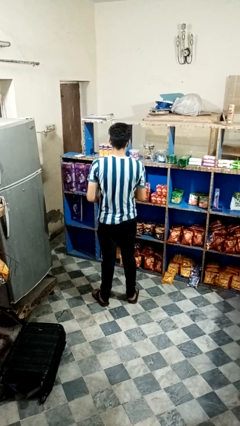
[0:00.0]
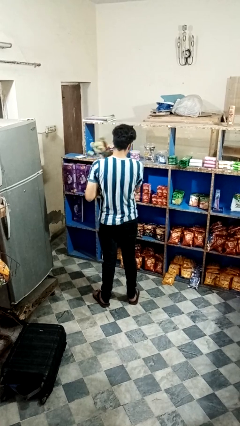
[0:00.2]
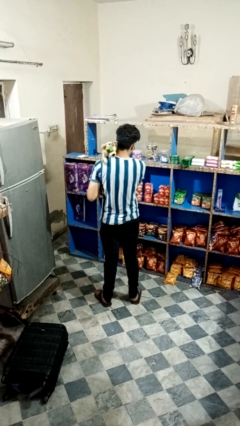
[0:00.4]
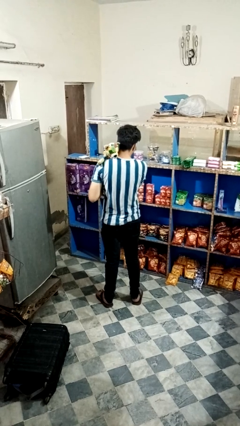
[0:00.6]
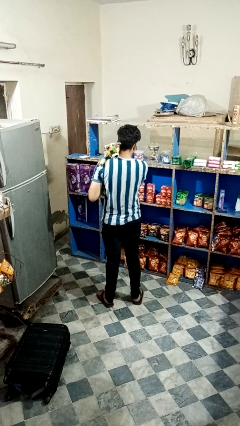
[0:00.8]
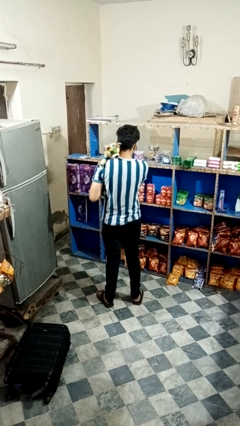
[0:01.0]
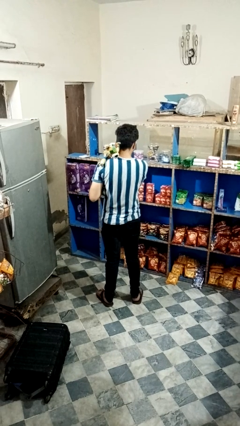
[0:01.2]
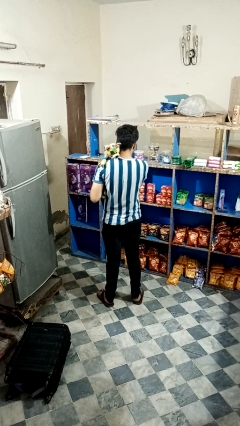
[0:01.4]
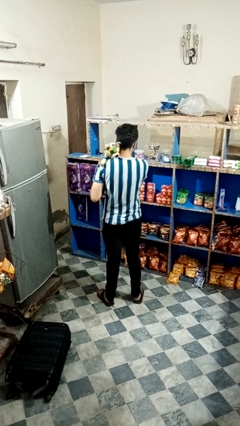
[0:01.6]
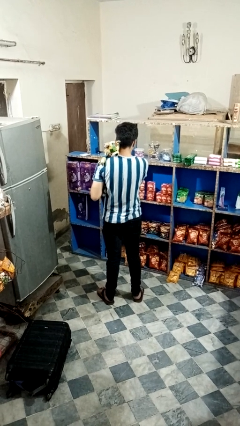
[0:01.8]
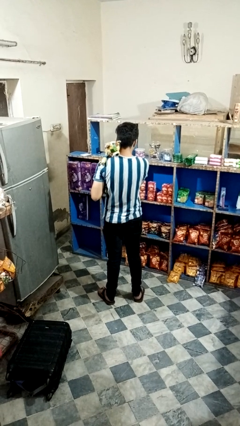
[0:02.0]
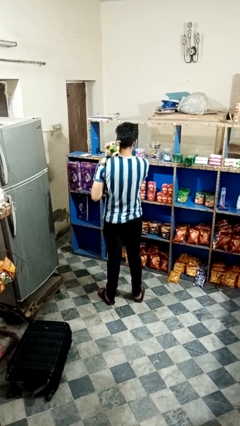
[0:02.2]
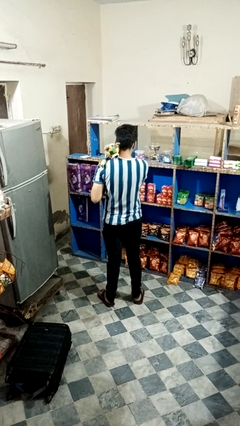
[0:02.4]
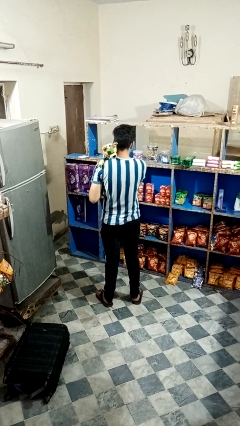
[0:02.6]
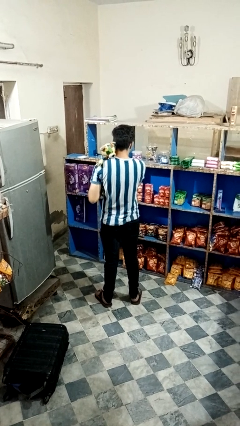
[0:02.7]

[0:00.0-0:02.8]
person hugs stuffed animal

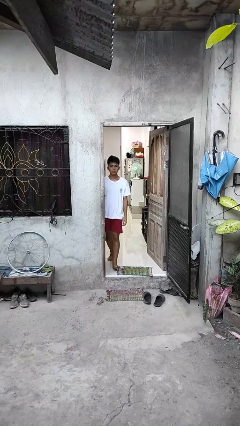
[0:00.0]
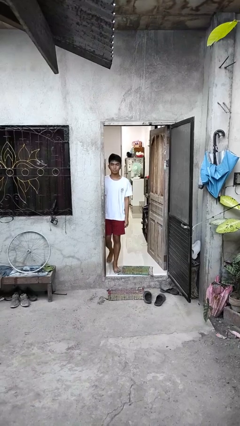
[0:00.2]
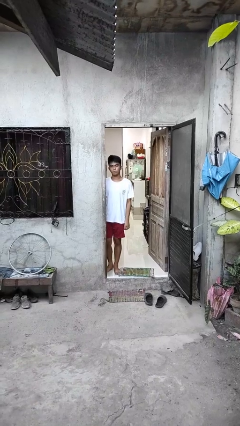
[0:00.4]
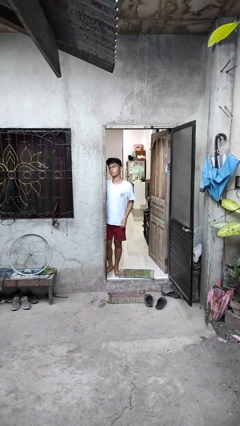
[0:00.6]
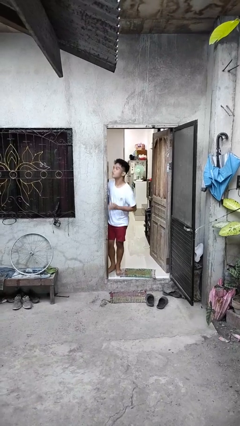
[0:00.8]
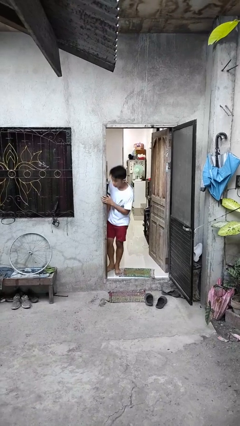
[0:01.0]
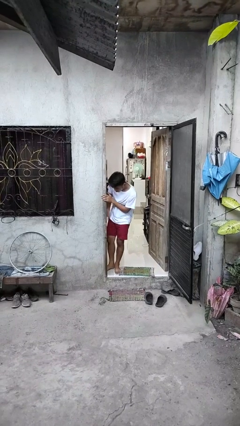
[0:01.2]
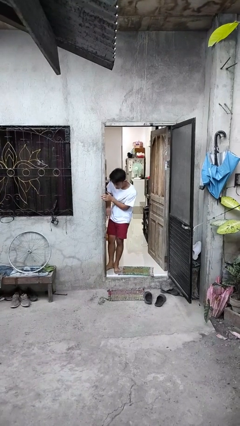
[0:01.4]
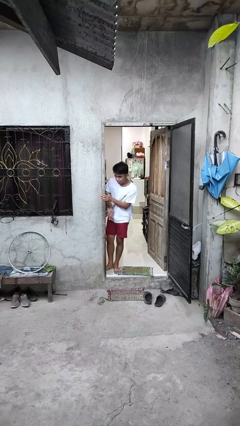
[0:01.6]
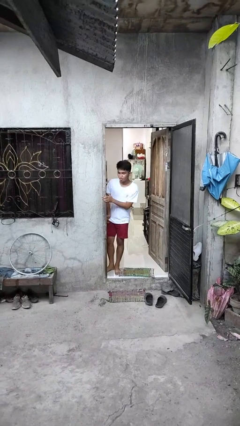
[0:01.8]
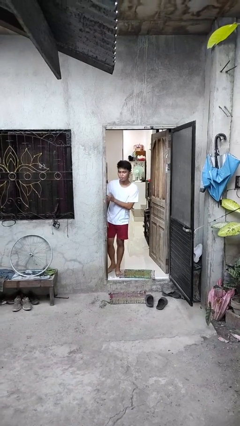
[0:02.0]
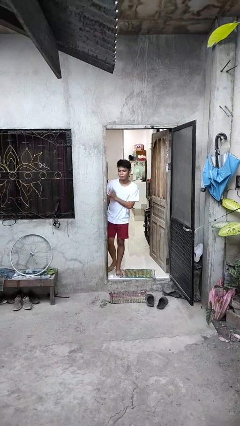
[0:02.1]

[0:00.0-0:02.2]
person bumps into wall

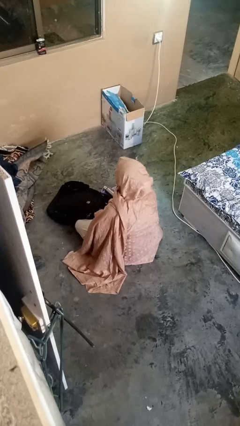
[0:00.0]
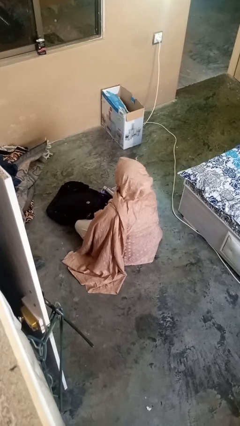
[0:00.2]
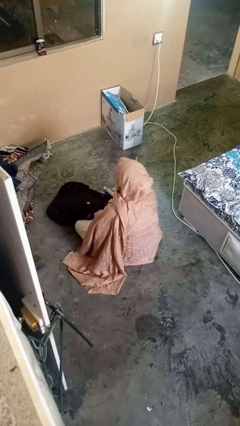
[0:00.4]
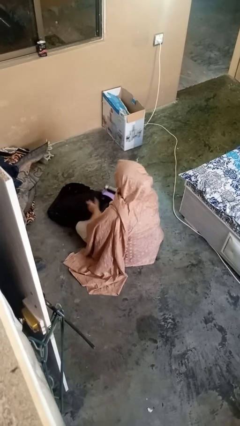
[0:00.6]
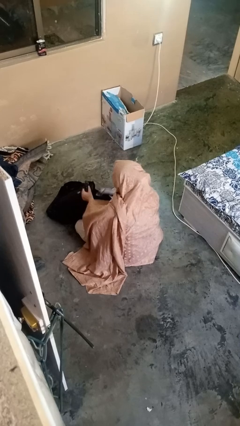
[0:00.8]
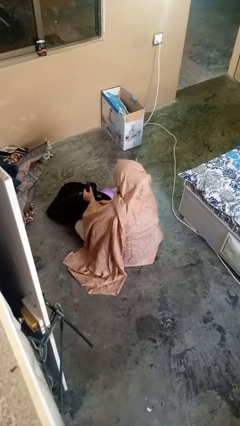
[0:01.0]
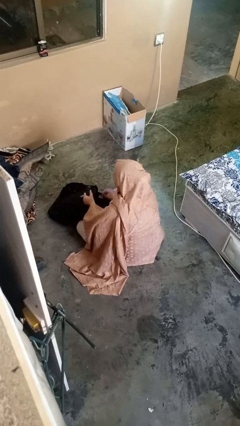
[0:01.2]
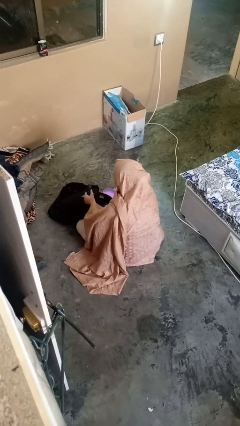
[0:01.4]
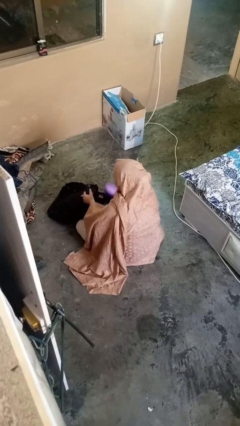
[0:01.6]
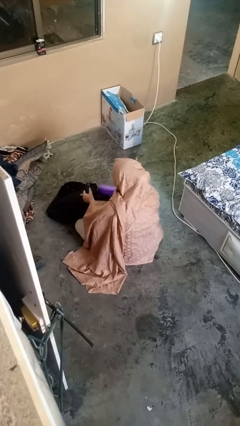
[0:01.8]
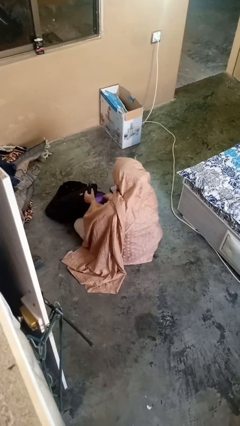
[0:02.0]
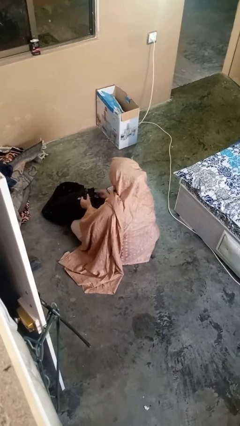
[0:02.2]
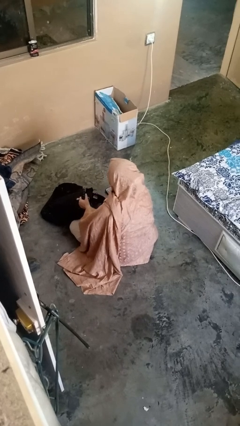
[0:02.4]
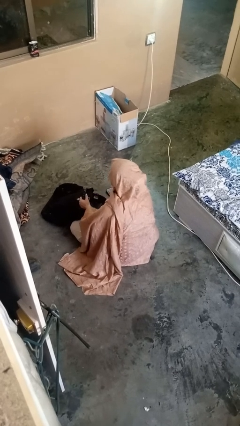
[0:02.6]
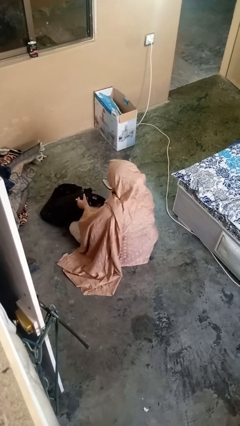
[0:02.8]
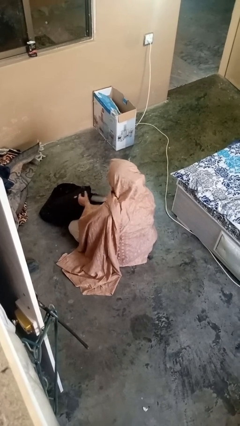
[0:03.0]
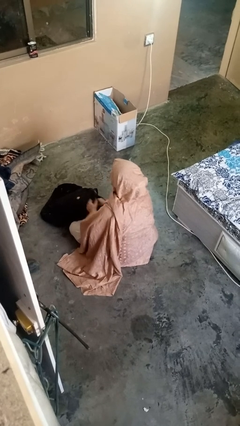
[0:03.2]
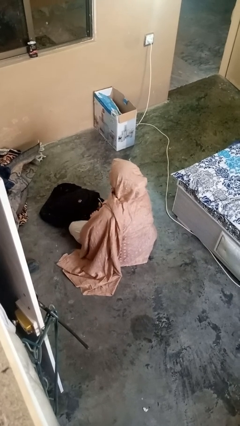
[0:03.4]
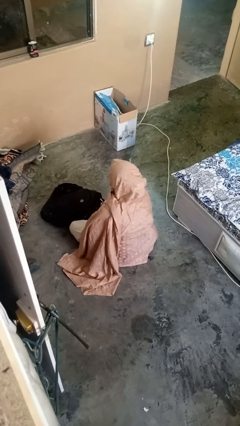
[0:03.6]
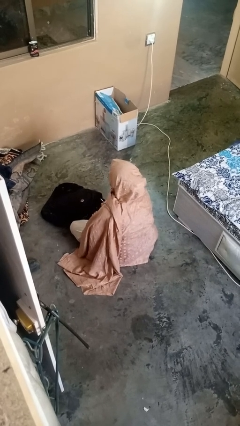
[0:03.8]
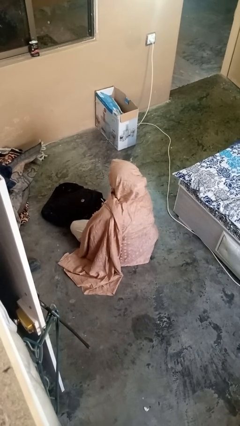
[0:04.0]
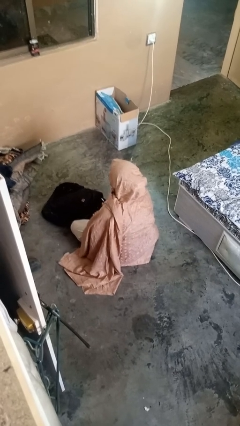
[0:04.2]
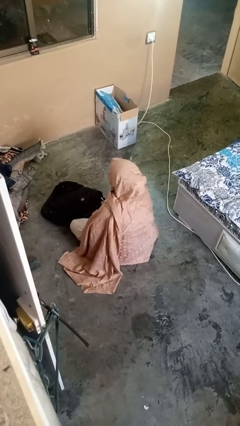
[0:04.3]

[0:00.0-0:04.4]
person puts object into backpack

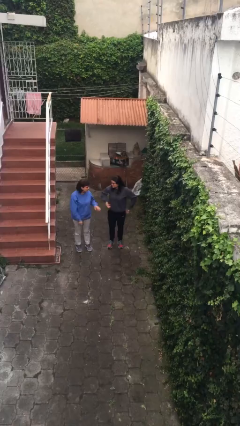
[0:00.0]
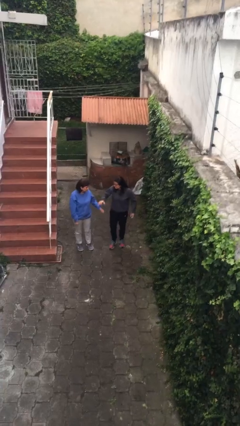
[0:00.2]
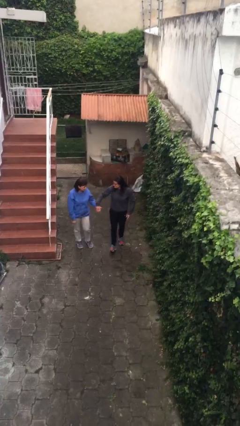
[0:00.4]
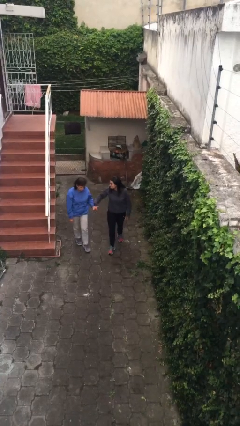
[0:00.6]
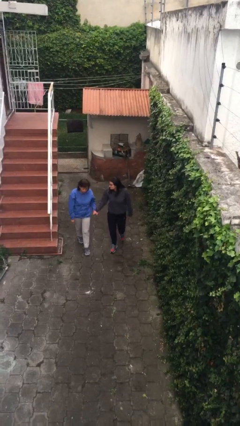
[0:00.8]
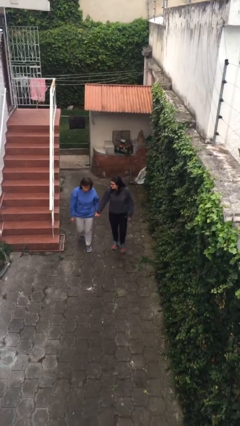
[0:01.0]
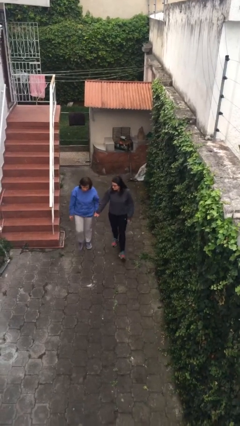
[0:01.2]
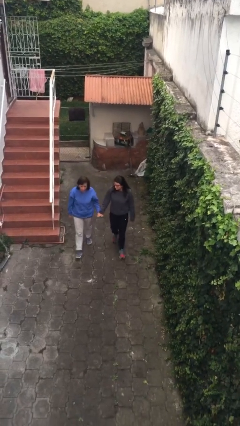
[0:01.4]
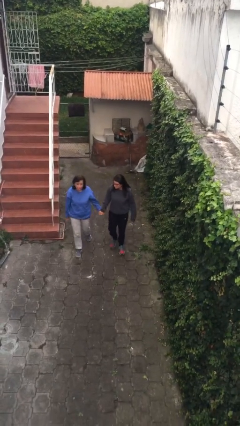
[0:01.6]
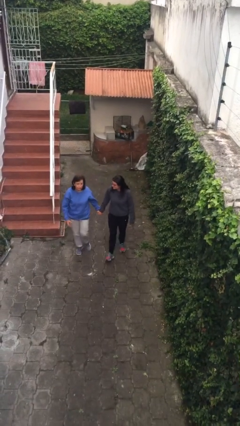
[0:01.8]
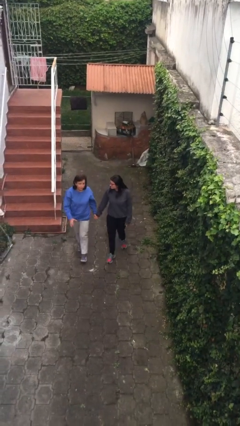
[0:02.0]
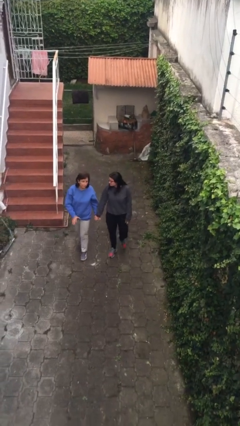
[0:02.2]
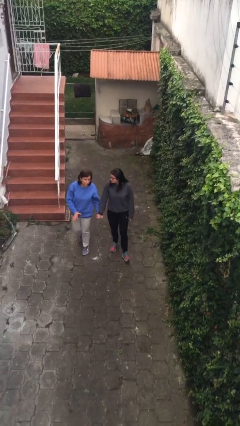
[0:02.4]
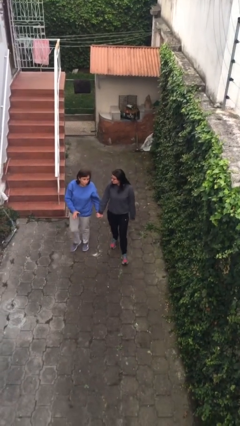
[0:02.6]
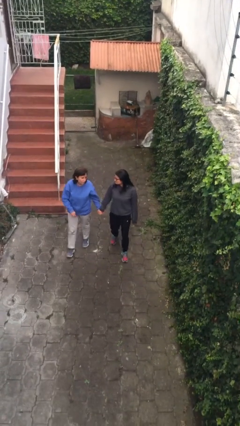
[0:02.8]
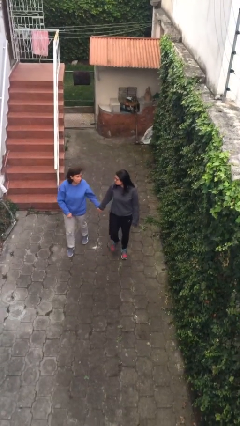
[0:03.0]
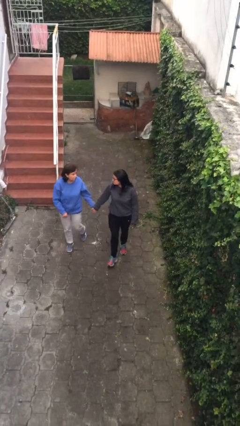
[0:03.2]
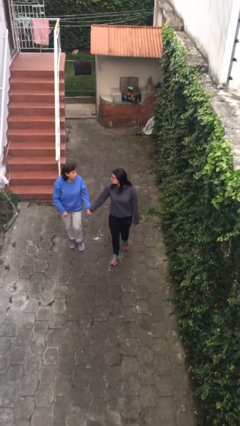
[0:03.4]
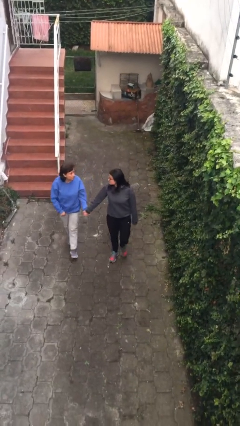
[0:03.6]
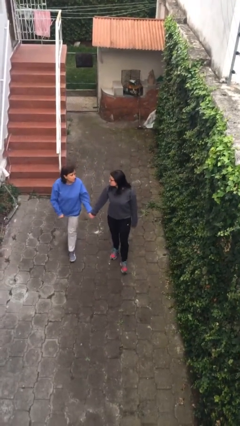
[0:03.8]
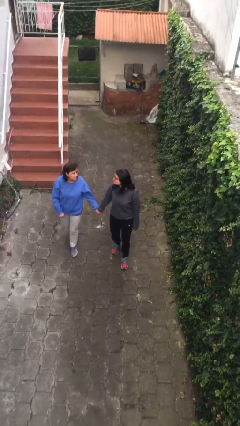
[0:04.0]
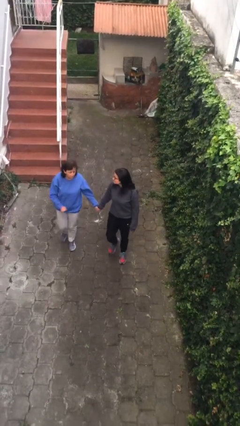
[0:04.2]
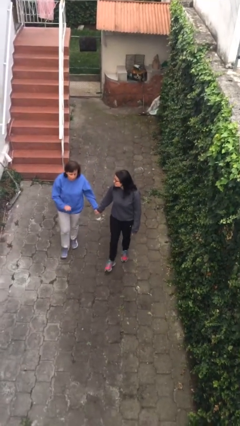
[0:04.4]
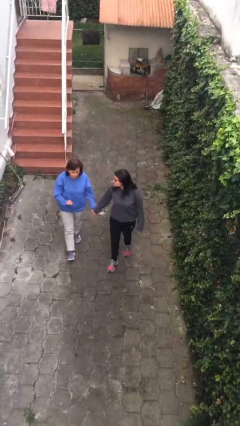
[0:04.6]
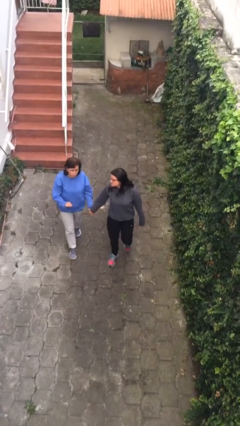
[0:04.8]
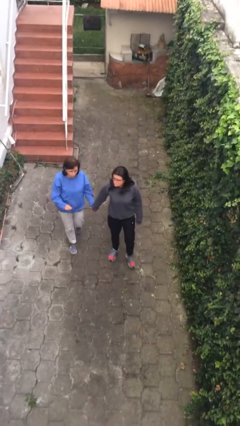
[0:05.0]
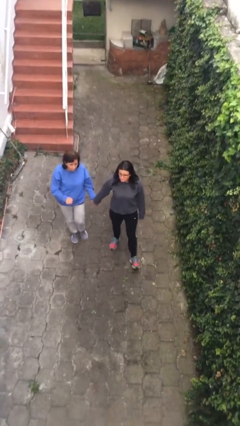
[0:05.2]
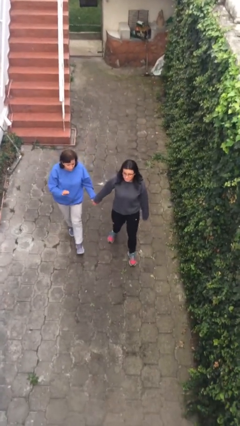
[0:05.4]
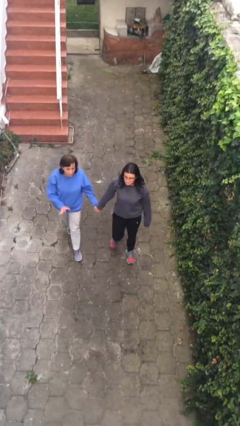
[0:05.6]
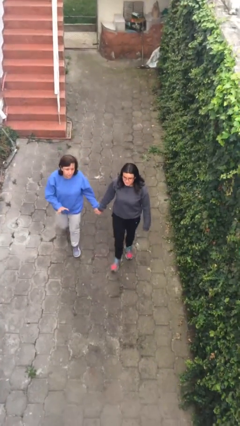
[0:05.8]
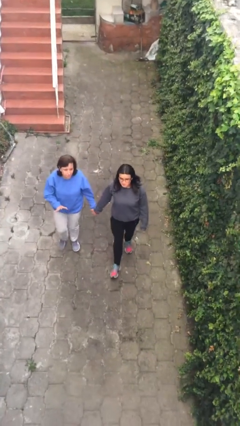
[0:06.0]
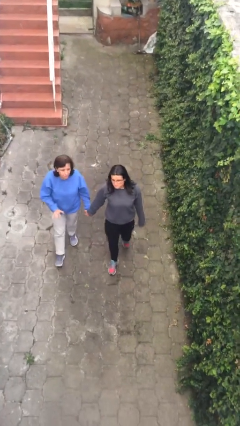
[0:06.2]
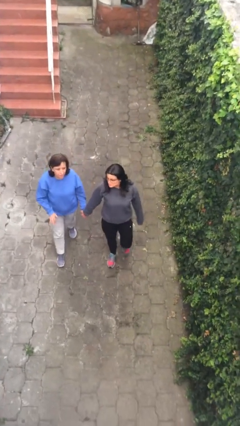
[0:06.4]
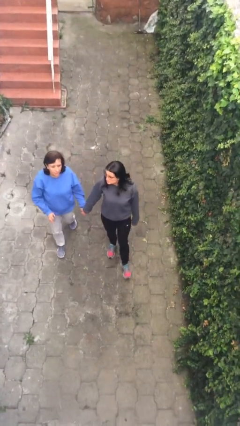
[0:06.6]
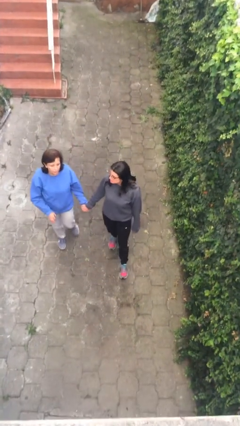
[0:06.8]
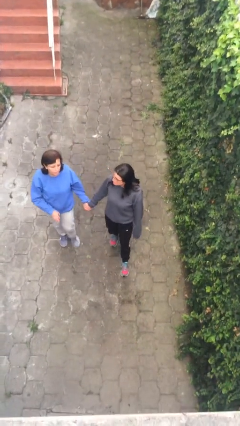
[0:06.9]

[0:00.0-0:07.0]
person holds hand

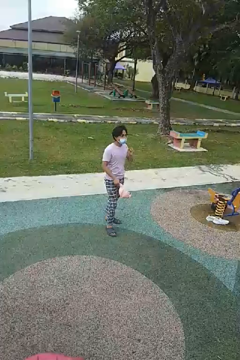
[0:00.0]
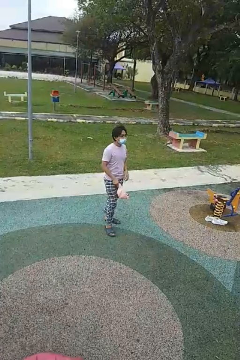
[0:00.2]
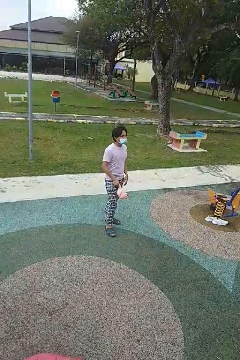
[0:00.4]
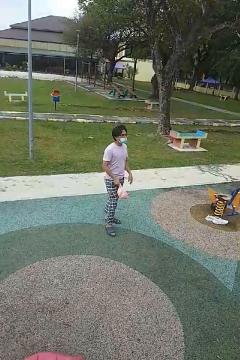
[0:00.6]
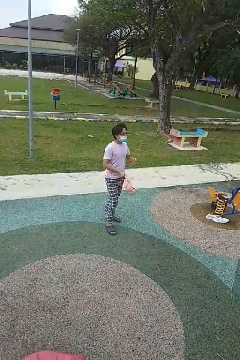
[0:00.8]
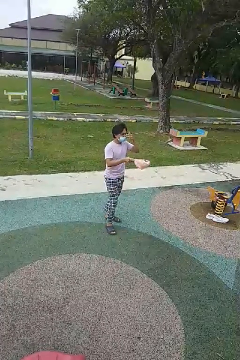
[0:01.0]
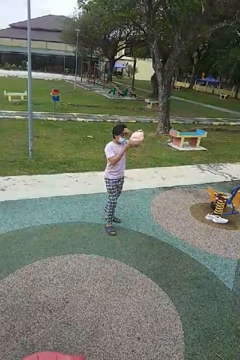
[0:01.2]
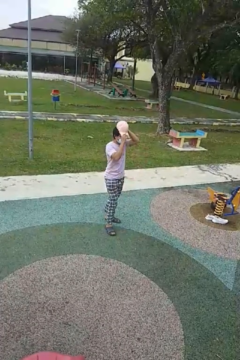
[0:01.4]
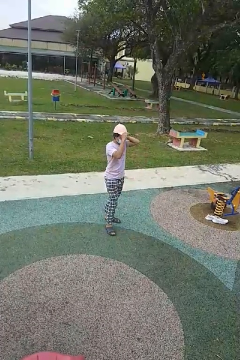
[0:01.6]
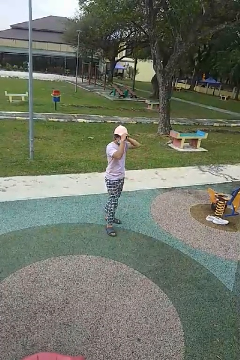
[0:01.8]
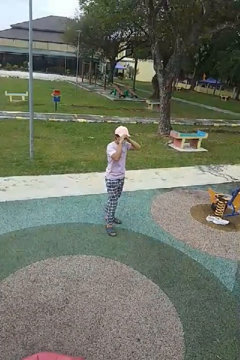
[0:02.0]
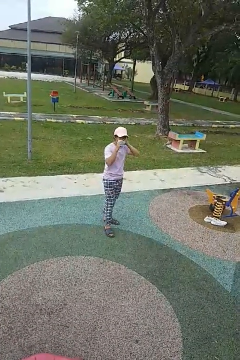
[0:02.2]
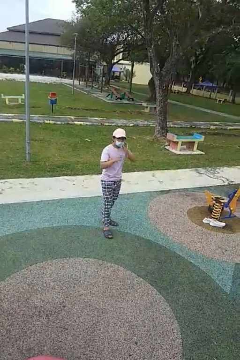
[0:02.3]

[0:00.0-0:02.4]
person puts on hat
